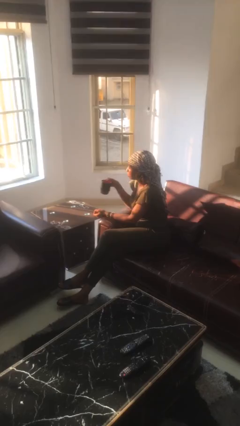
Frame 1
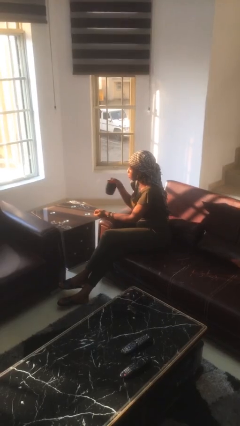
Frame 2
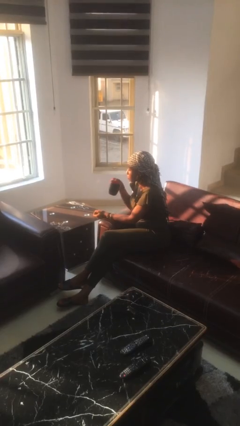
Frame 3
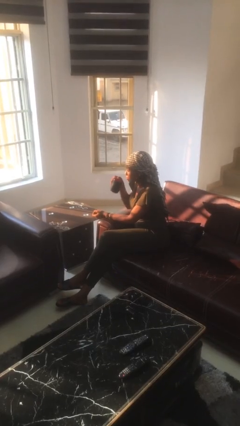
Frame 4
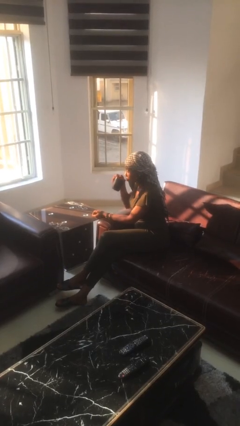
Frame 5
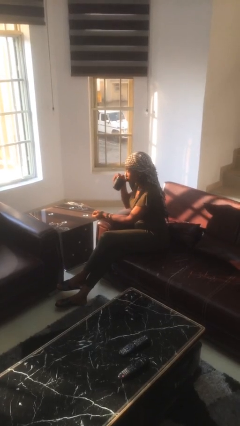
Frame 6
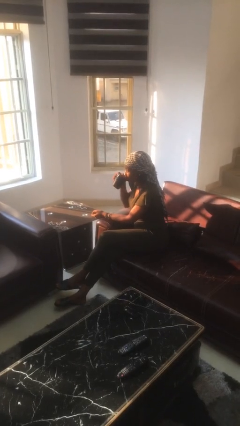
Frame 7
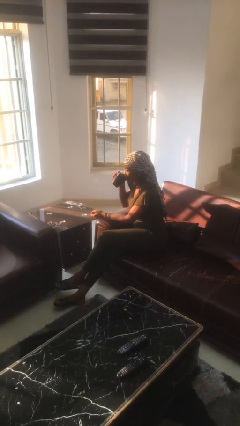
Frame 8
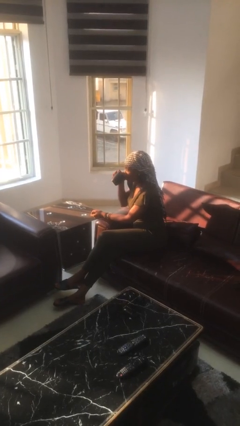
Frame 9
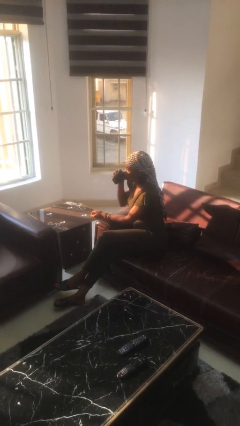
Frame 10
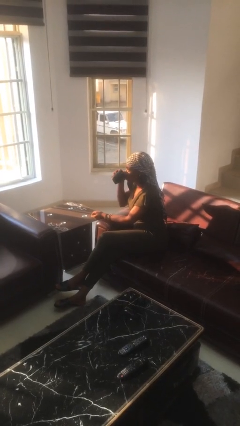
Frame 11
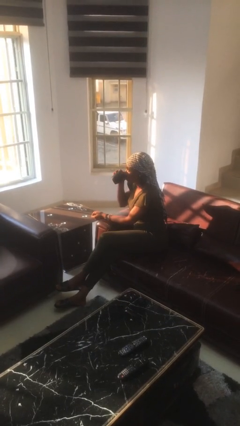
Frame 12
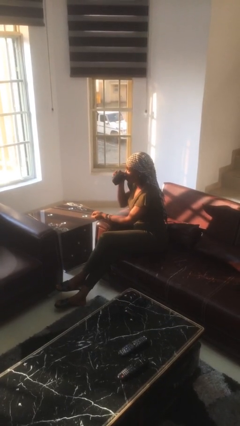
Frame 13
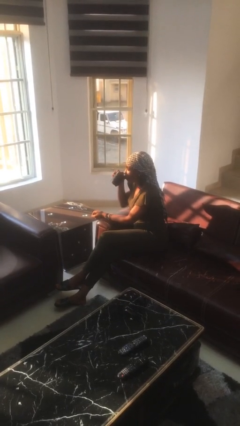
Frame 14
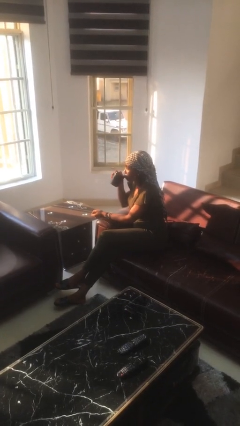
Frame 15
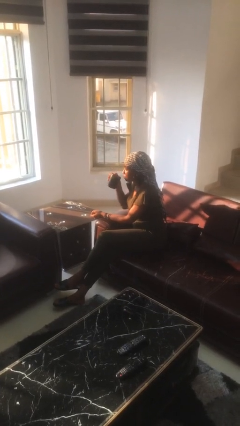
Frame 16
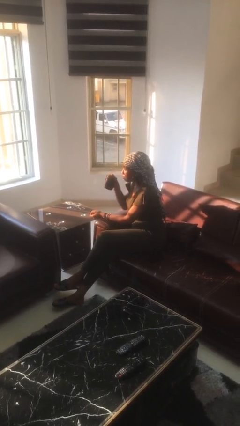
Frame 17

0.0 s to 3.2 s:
person drinks from mug

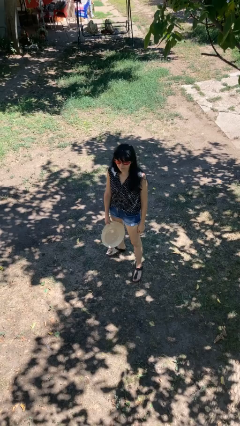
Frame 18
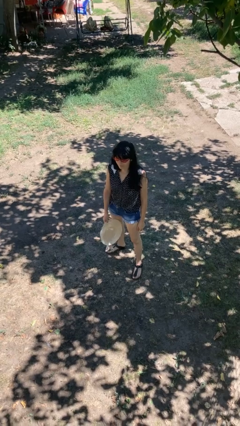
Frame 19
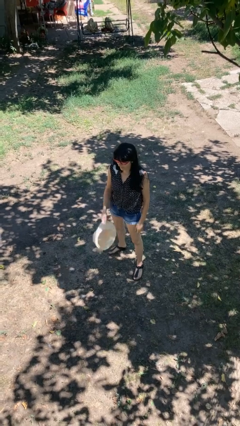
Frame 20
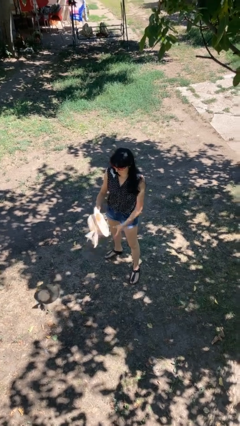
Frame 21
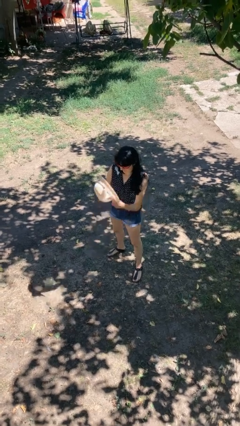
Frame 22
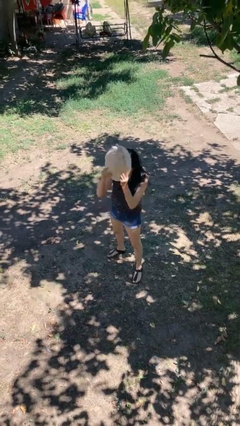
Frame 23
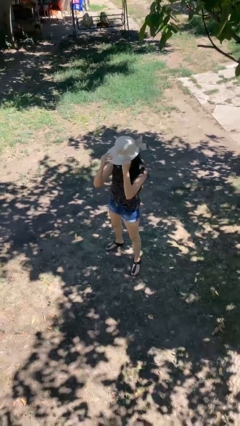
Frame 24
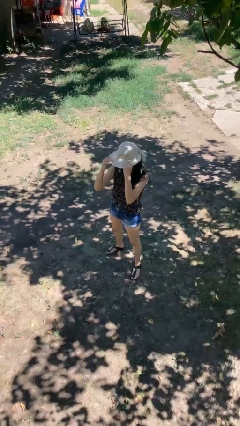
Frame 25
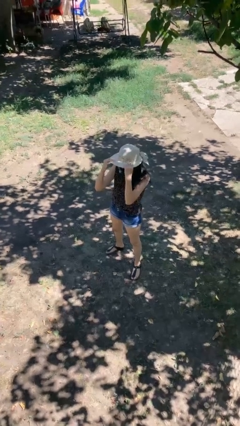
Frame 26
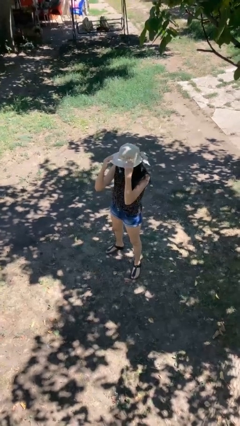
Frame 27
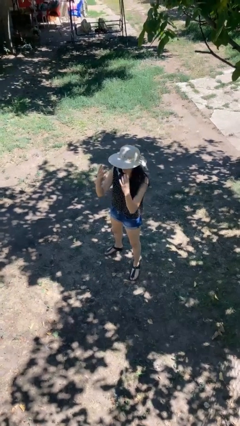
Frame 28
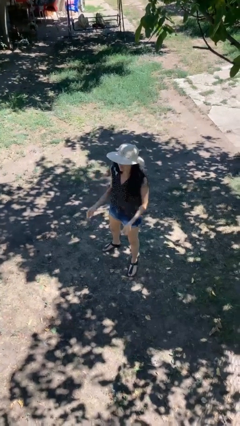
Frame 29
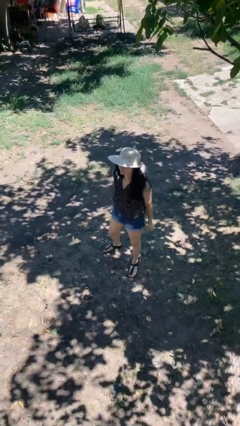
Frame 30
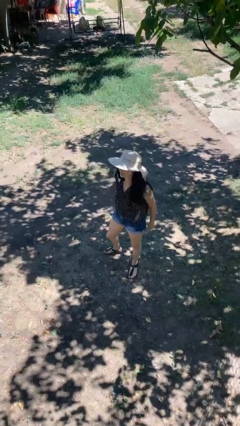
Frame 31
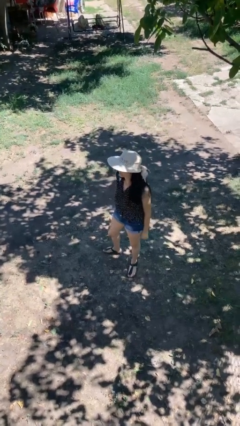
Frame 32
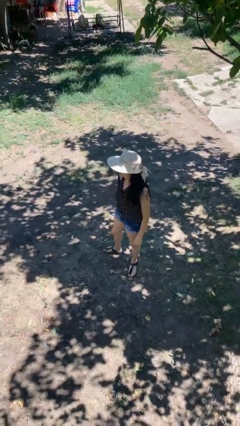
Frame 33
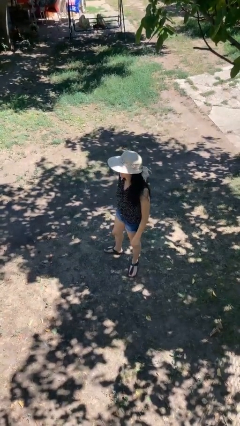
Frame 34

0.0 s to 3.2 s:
person puts on hat

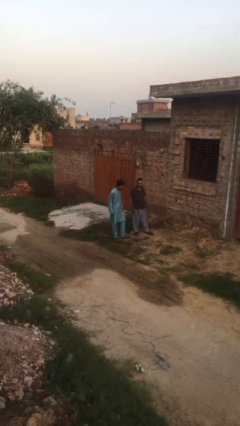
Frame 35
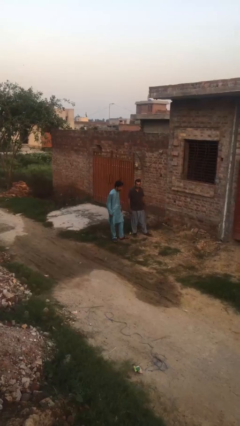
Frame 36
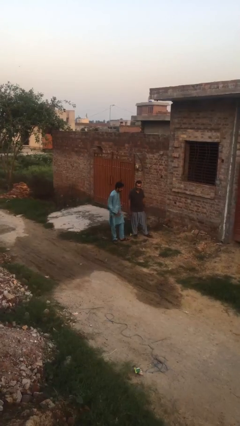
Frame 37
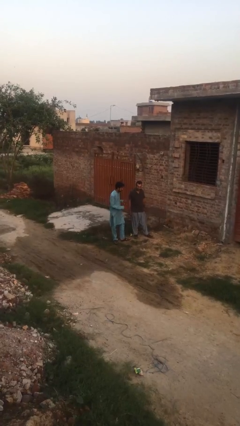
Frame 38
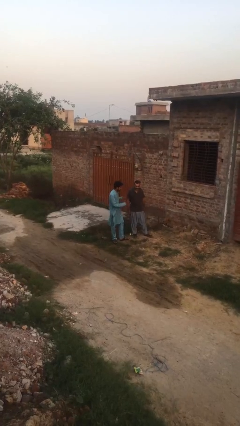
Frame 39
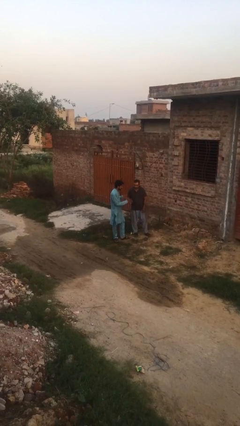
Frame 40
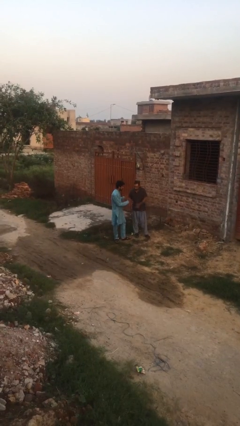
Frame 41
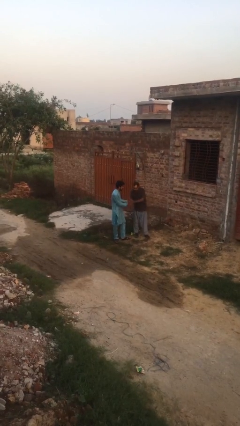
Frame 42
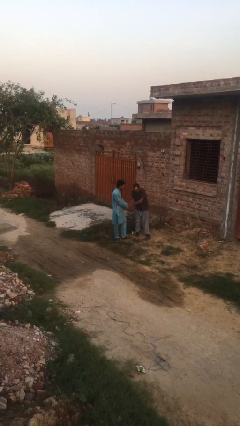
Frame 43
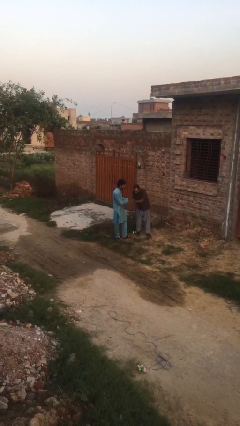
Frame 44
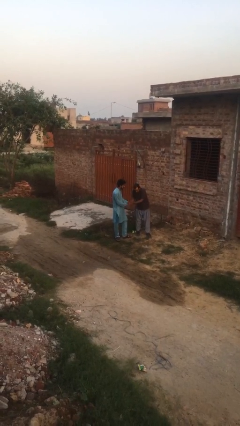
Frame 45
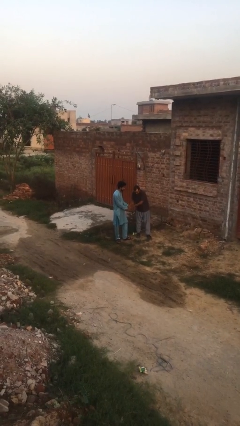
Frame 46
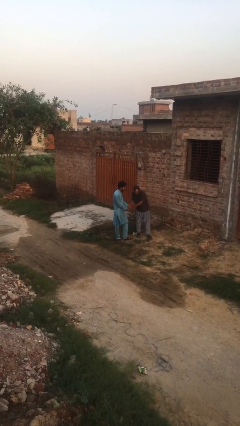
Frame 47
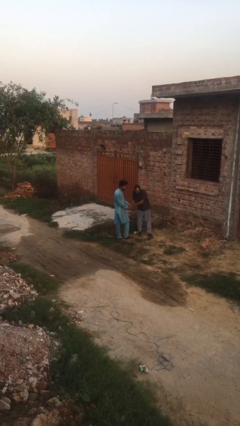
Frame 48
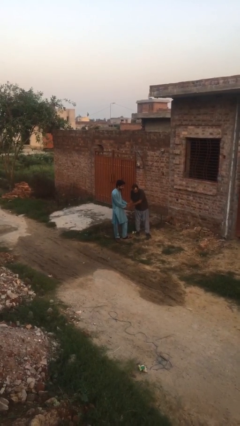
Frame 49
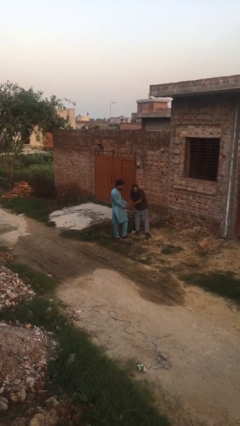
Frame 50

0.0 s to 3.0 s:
person shakes hand

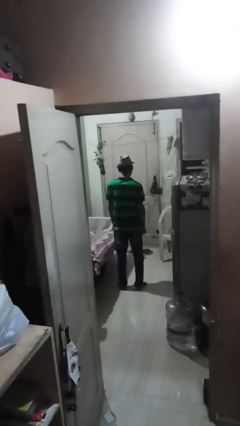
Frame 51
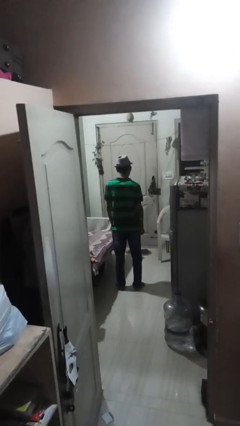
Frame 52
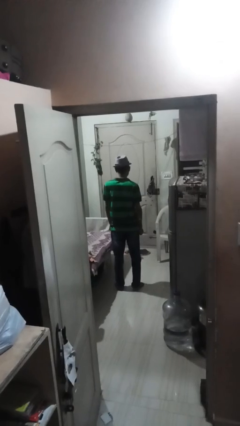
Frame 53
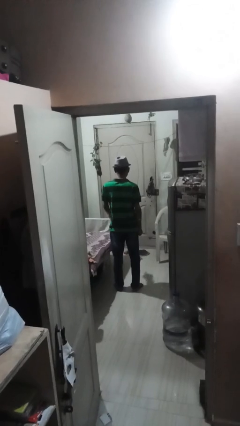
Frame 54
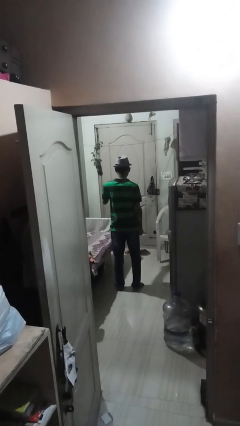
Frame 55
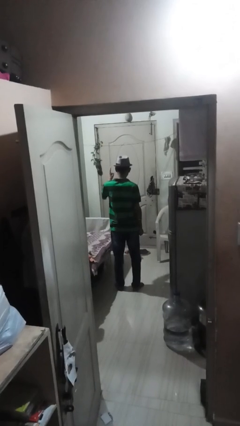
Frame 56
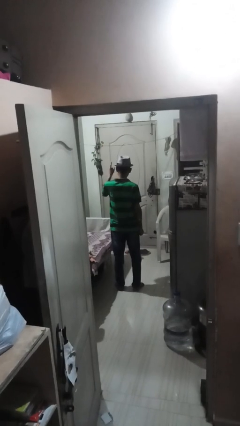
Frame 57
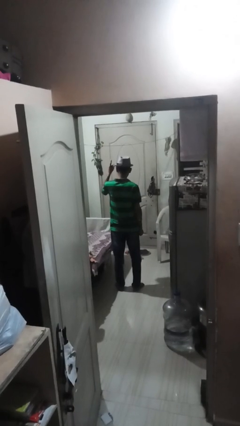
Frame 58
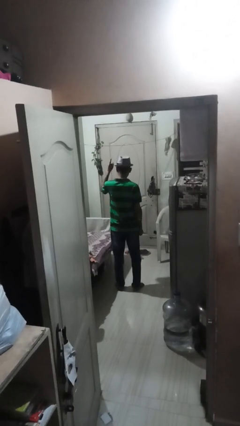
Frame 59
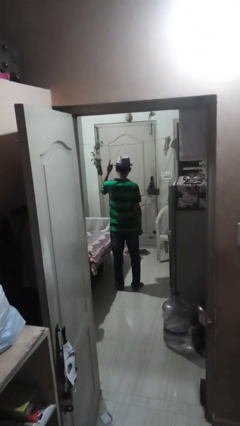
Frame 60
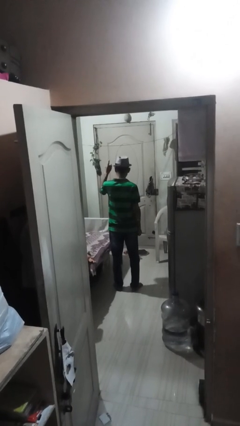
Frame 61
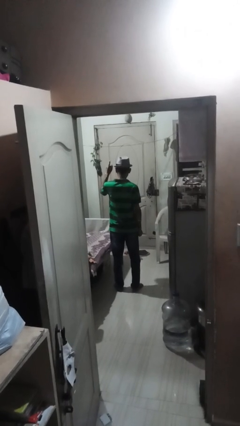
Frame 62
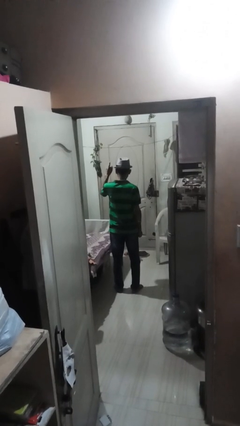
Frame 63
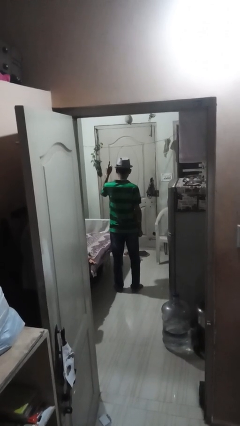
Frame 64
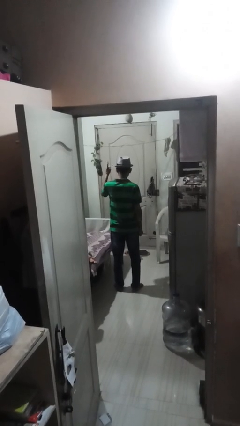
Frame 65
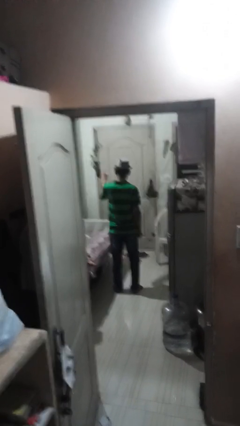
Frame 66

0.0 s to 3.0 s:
person gestures number one

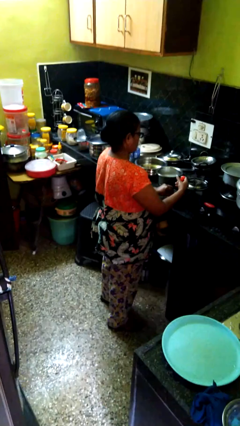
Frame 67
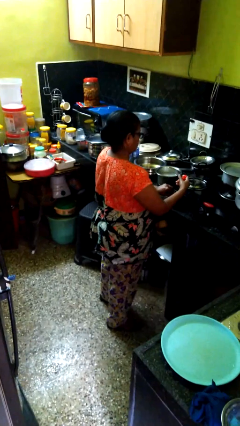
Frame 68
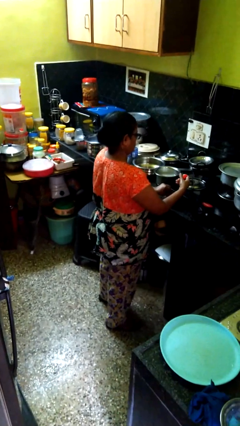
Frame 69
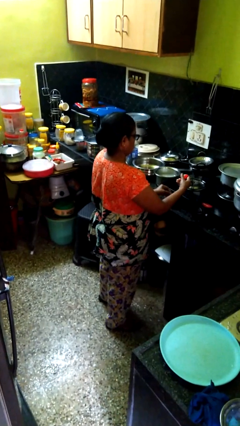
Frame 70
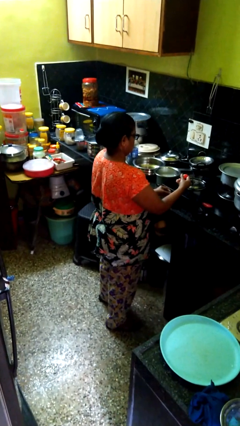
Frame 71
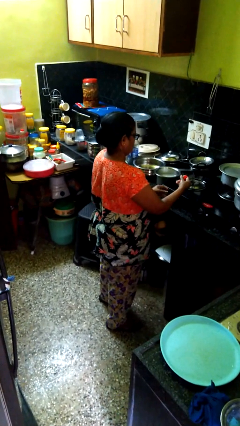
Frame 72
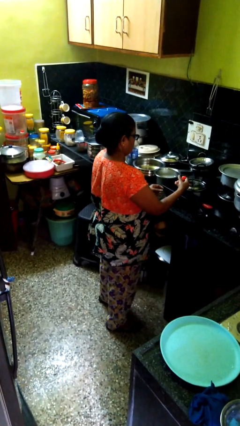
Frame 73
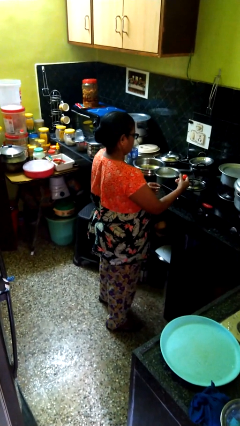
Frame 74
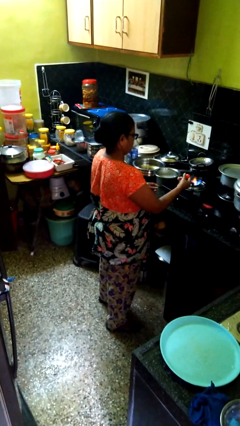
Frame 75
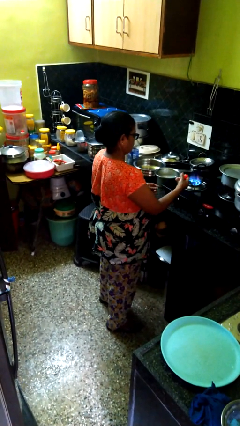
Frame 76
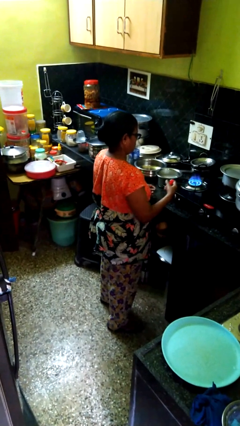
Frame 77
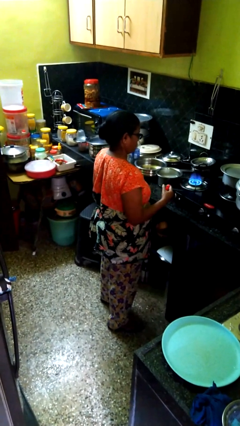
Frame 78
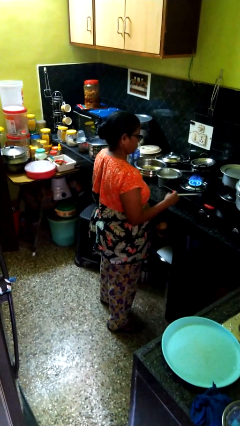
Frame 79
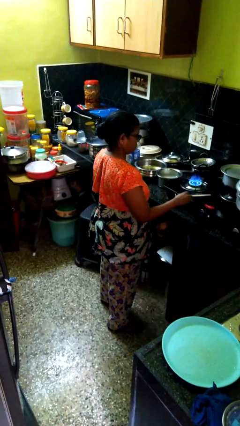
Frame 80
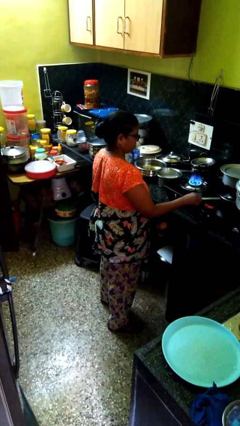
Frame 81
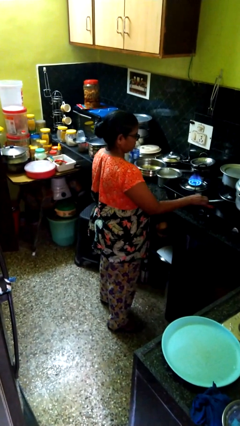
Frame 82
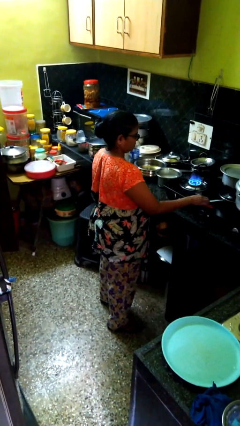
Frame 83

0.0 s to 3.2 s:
person turns on stovetop

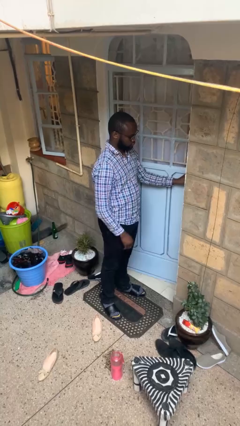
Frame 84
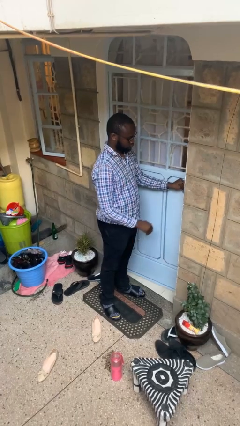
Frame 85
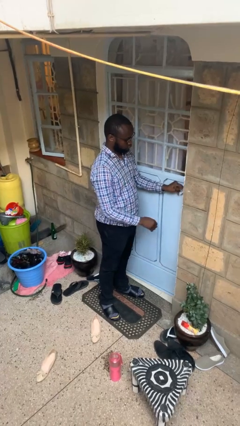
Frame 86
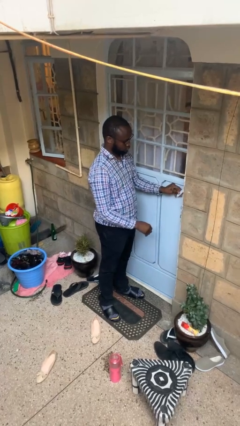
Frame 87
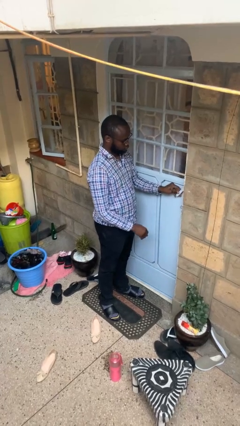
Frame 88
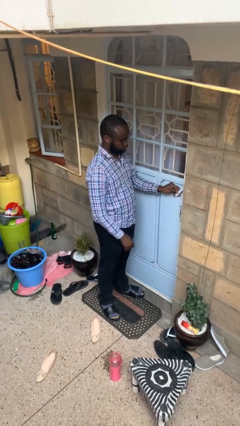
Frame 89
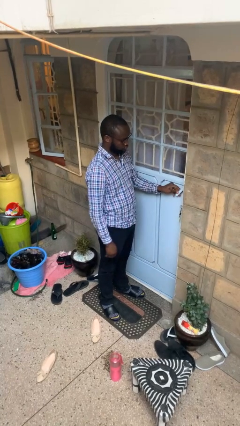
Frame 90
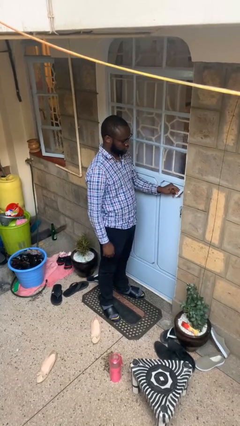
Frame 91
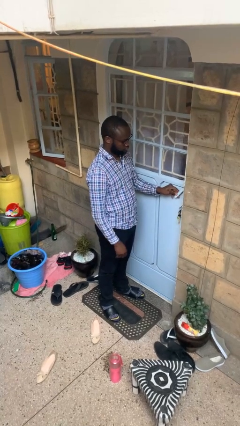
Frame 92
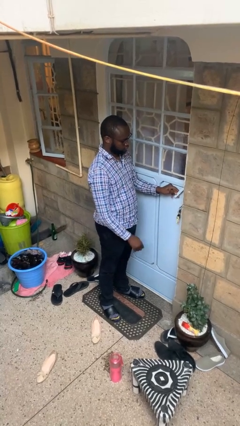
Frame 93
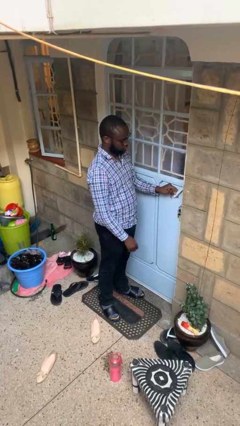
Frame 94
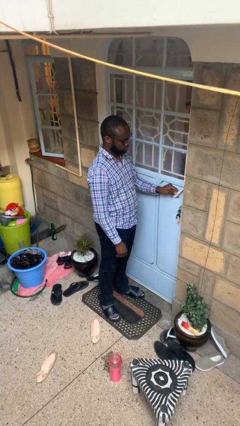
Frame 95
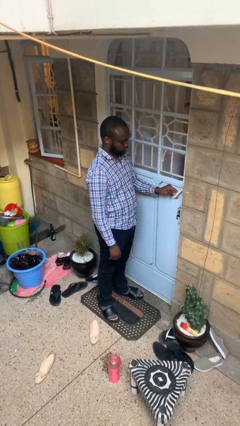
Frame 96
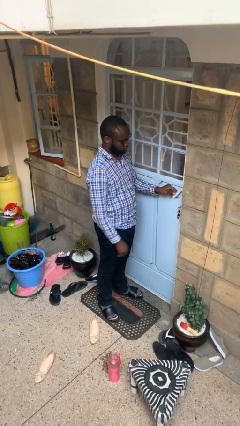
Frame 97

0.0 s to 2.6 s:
person closes facility door
